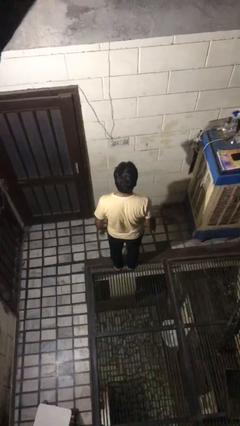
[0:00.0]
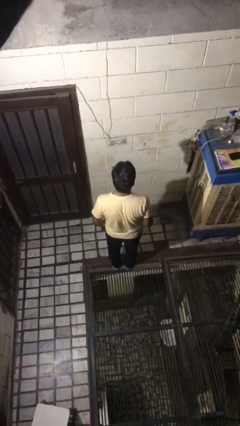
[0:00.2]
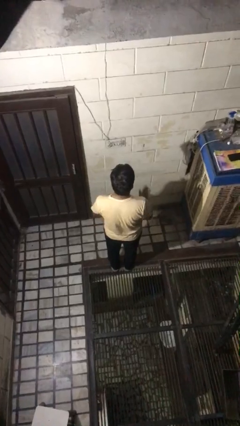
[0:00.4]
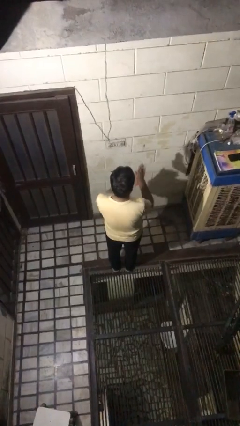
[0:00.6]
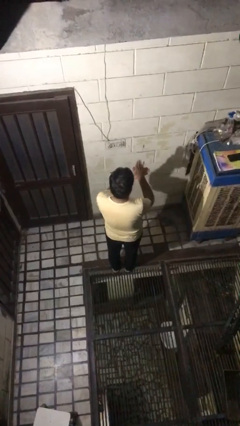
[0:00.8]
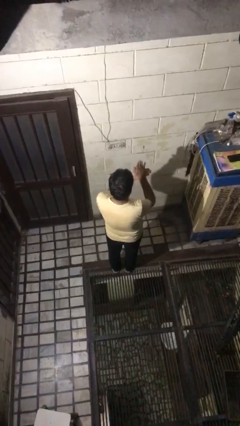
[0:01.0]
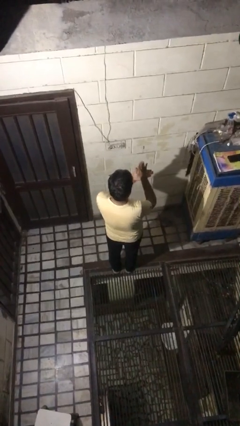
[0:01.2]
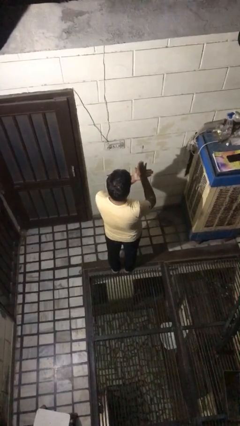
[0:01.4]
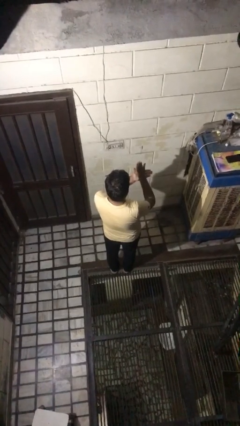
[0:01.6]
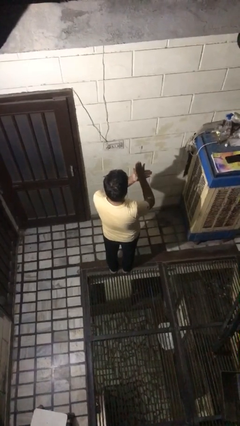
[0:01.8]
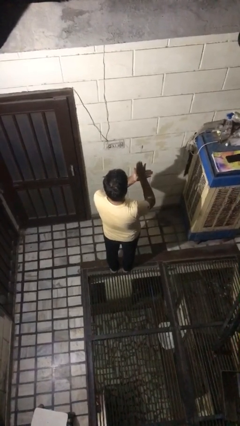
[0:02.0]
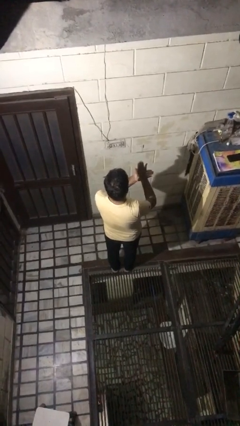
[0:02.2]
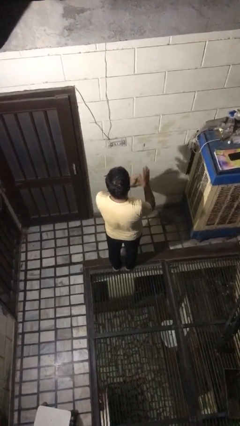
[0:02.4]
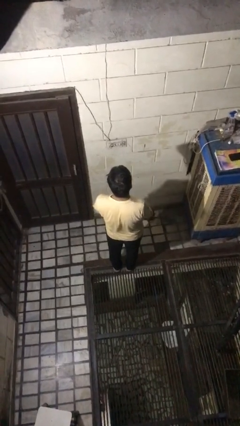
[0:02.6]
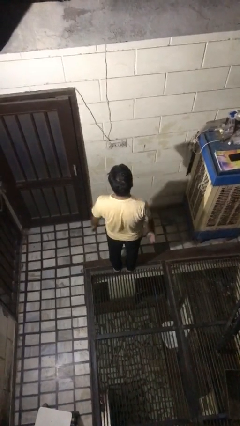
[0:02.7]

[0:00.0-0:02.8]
person gestures number five

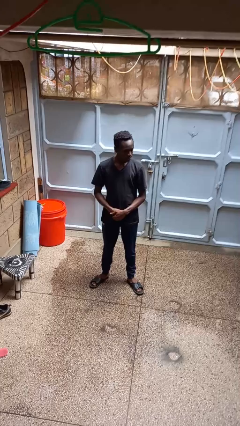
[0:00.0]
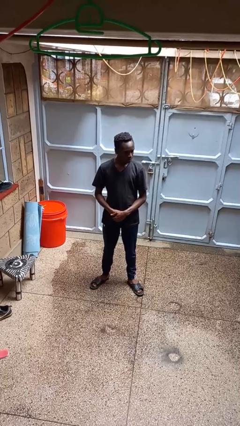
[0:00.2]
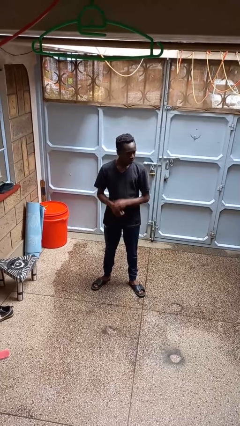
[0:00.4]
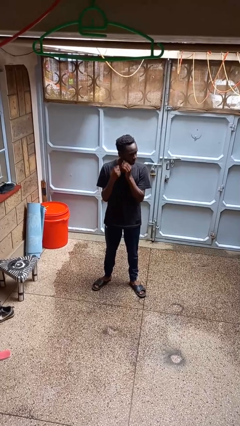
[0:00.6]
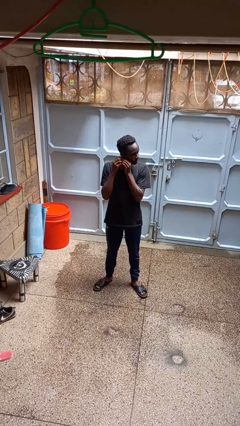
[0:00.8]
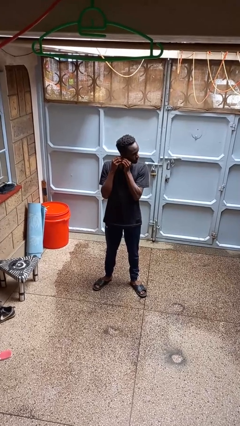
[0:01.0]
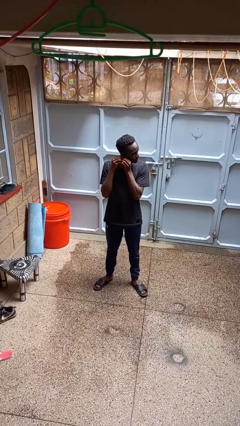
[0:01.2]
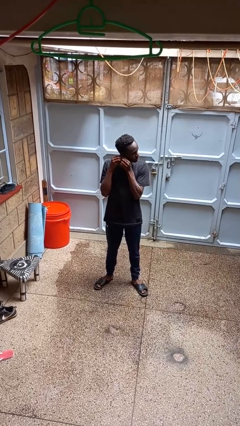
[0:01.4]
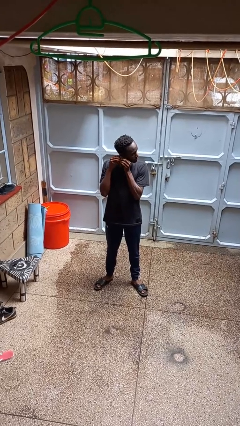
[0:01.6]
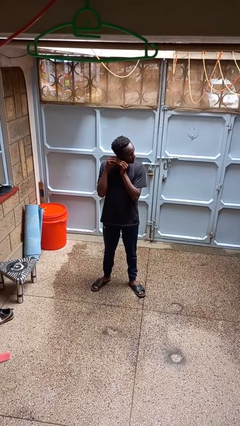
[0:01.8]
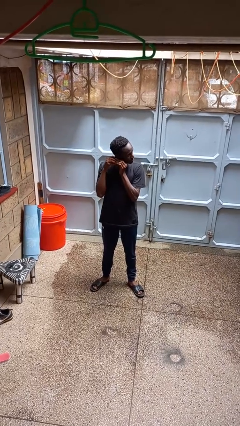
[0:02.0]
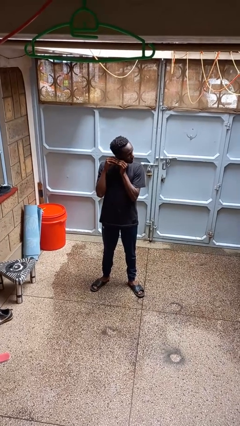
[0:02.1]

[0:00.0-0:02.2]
person takes off earrings

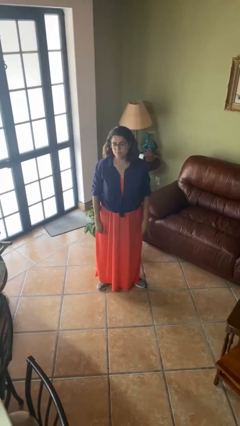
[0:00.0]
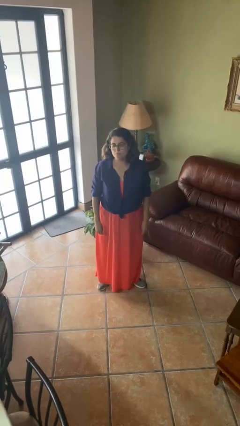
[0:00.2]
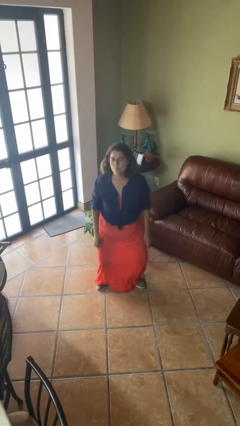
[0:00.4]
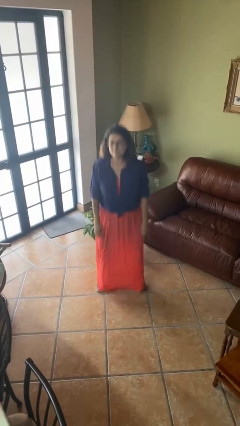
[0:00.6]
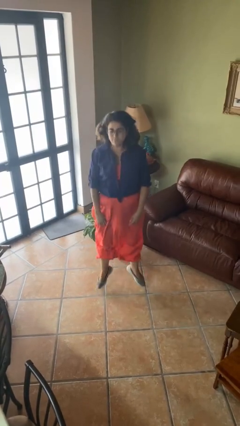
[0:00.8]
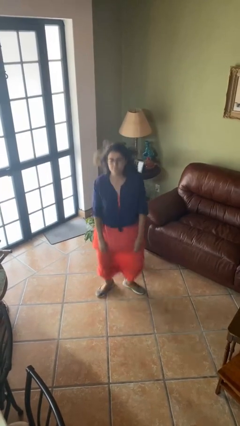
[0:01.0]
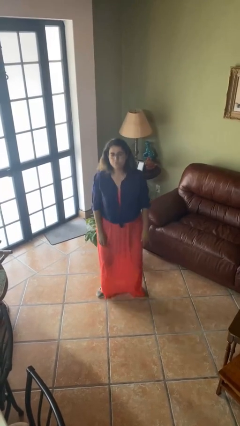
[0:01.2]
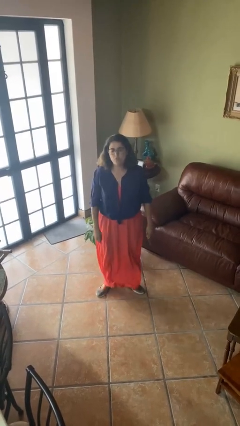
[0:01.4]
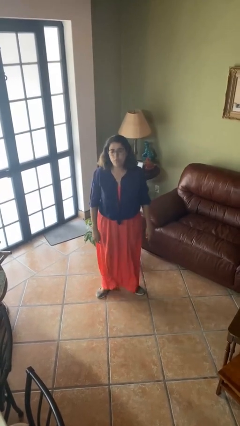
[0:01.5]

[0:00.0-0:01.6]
person jumps

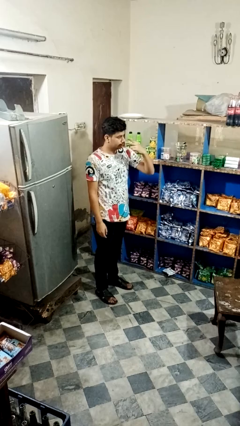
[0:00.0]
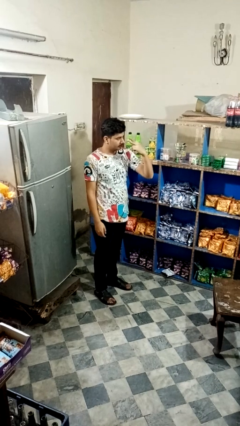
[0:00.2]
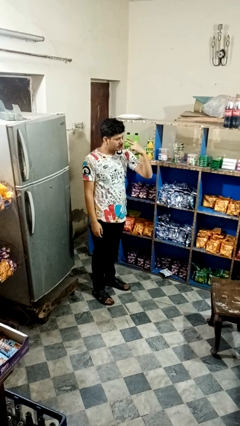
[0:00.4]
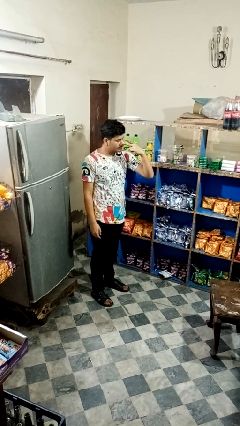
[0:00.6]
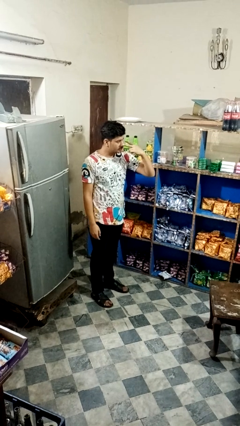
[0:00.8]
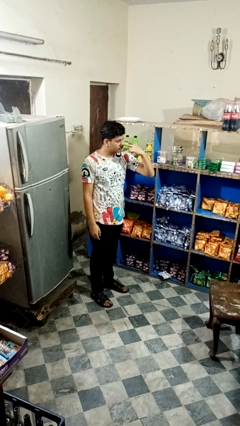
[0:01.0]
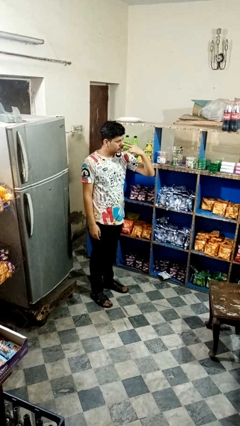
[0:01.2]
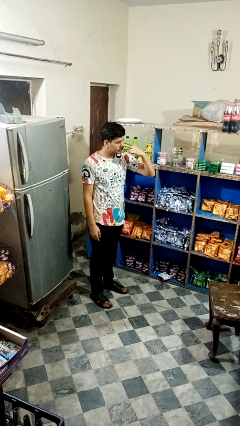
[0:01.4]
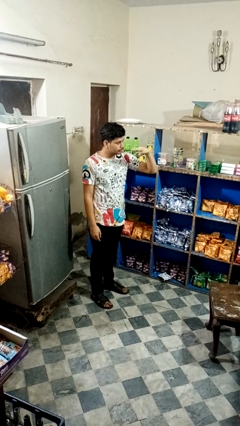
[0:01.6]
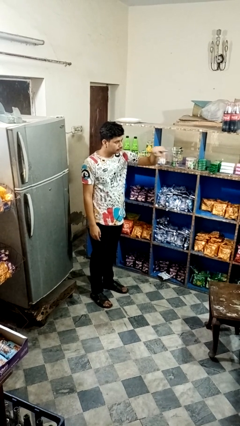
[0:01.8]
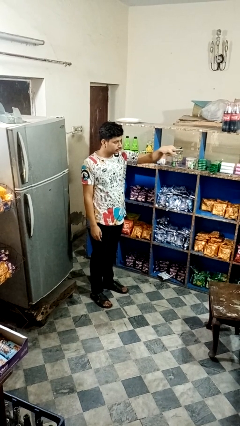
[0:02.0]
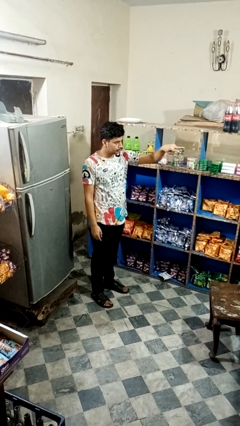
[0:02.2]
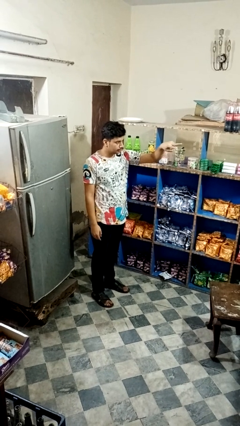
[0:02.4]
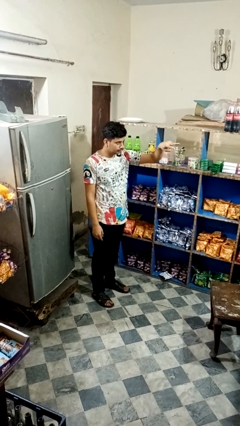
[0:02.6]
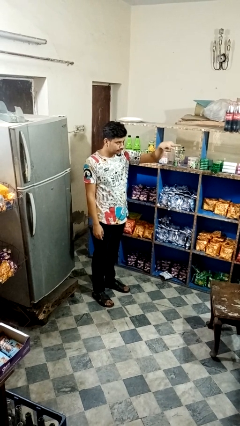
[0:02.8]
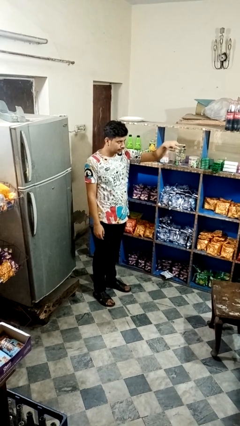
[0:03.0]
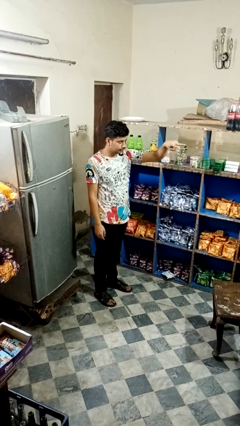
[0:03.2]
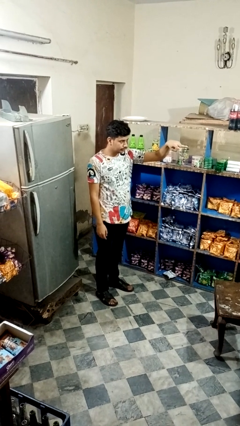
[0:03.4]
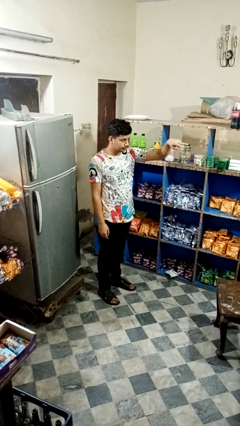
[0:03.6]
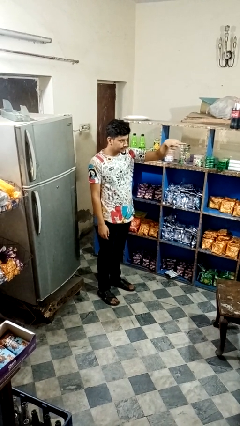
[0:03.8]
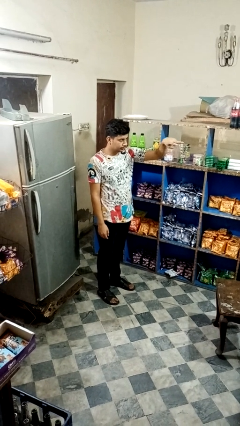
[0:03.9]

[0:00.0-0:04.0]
person gestures watch closely

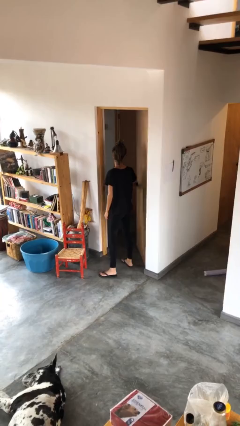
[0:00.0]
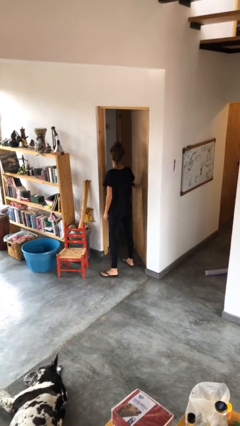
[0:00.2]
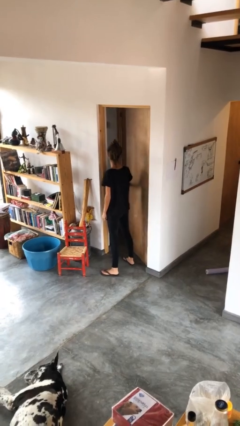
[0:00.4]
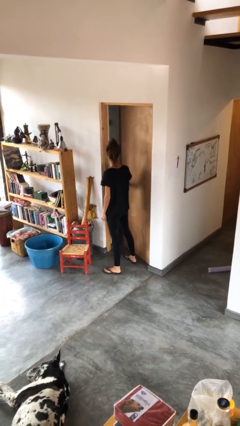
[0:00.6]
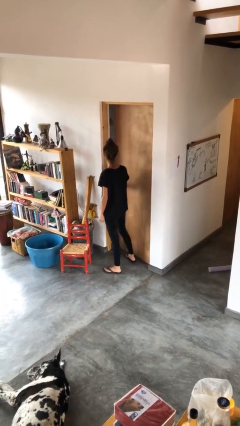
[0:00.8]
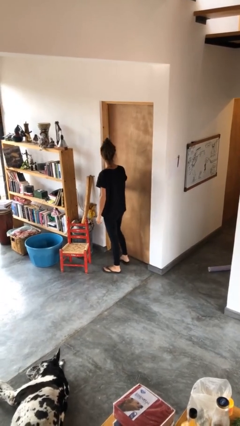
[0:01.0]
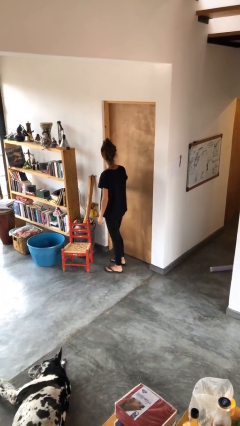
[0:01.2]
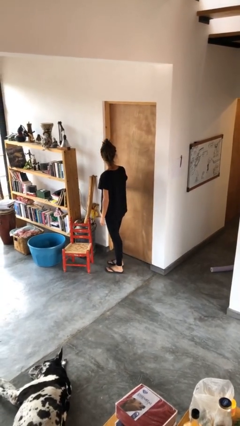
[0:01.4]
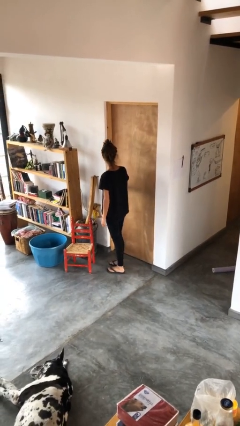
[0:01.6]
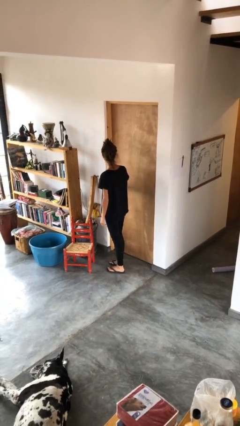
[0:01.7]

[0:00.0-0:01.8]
person closes facility door

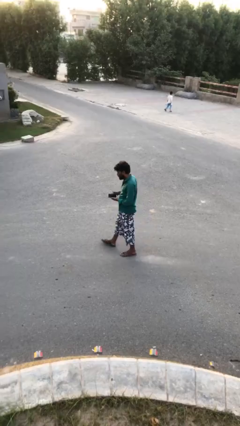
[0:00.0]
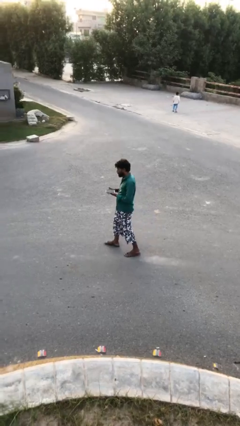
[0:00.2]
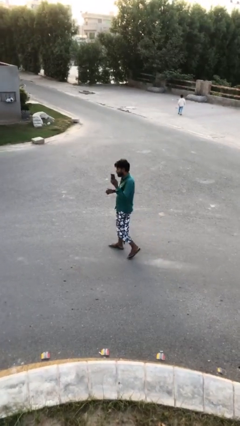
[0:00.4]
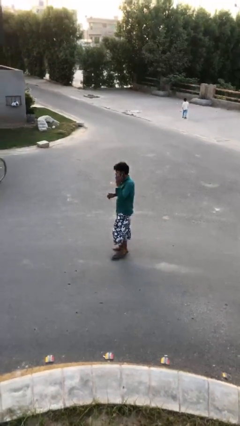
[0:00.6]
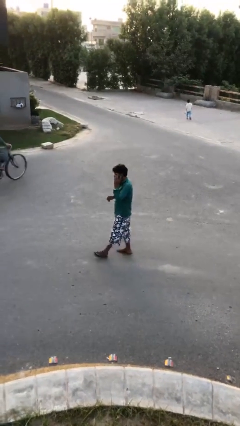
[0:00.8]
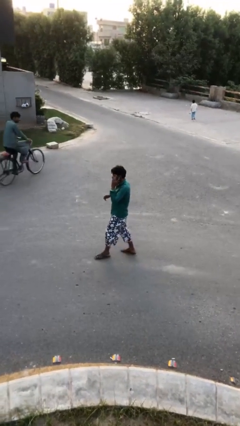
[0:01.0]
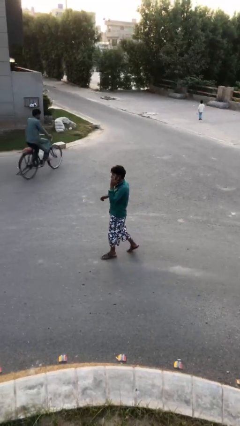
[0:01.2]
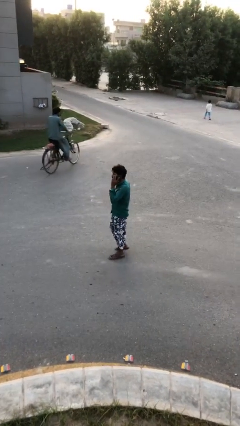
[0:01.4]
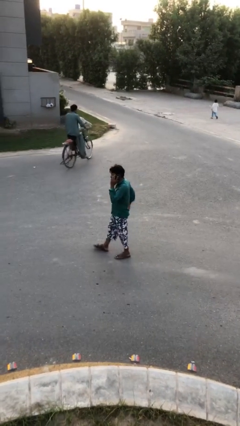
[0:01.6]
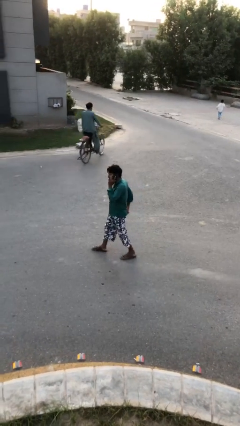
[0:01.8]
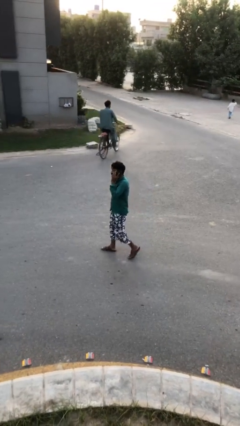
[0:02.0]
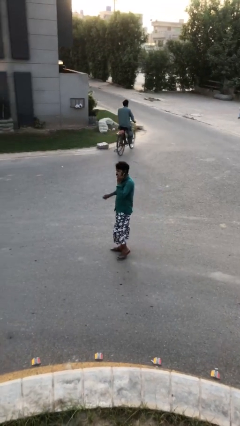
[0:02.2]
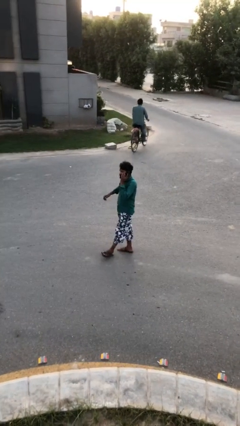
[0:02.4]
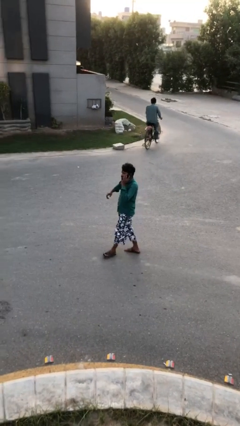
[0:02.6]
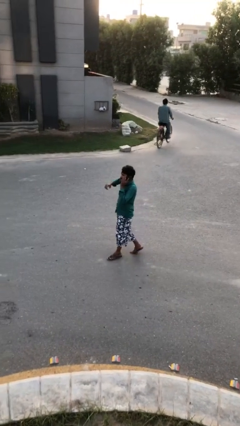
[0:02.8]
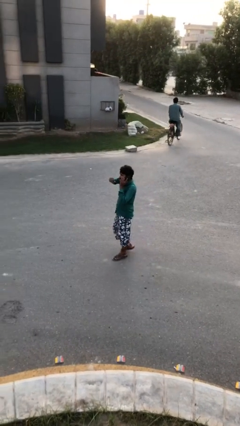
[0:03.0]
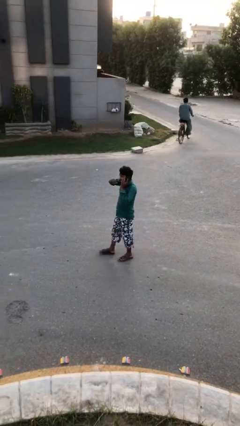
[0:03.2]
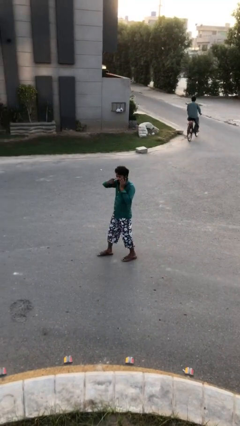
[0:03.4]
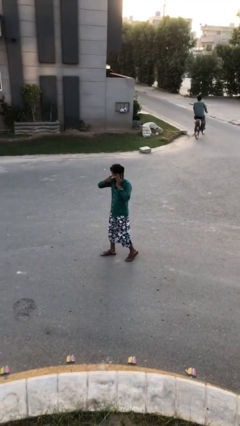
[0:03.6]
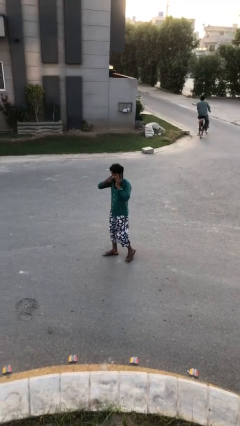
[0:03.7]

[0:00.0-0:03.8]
person talks on phone

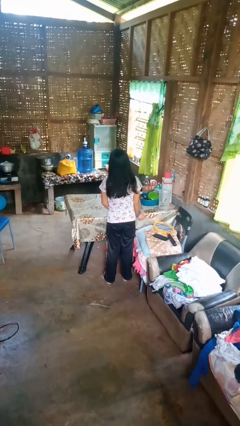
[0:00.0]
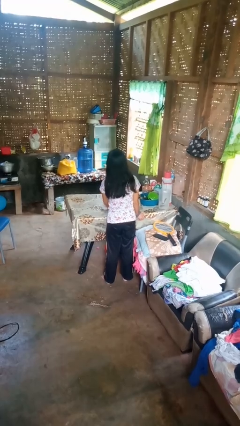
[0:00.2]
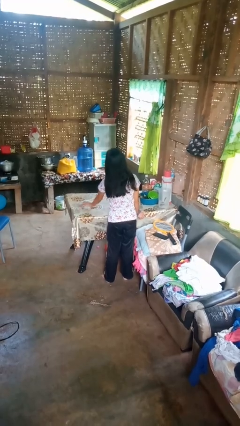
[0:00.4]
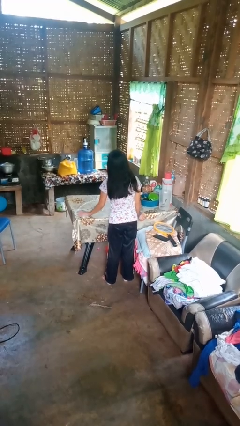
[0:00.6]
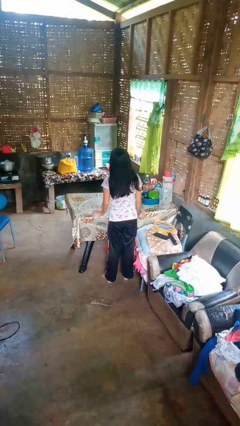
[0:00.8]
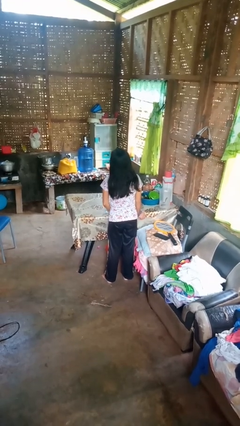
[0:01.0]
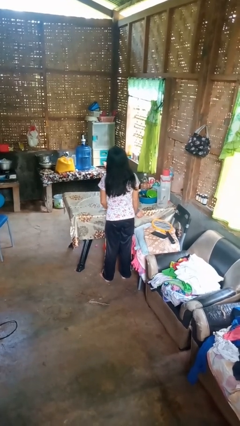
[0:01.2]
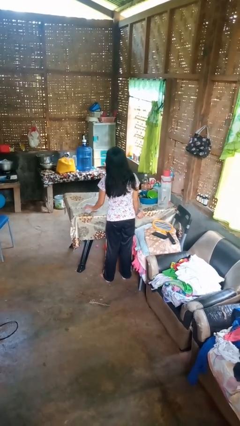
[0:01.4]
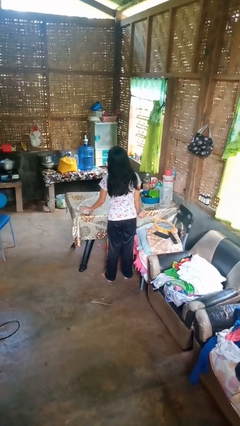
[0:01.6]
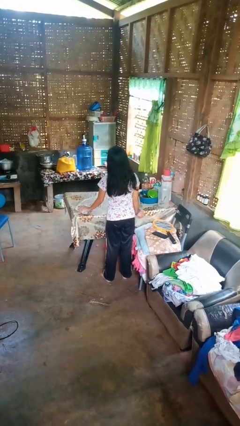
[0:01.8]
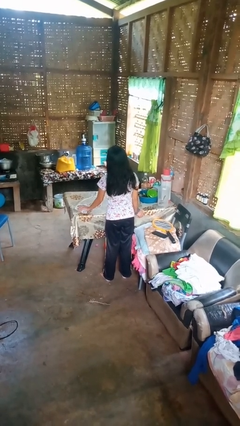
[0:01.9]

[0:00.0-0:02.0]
person cleans table with rag
